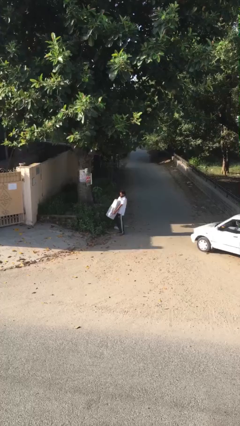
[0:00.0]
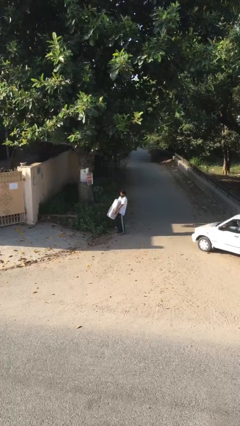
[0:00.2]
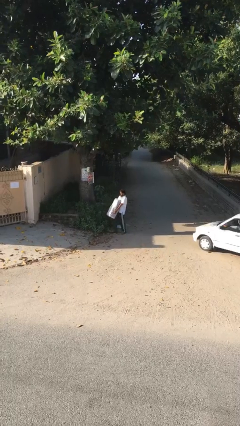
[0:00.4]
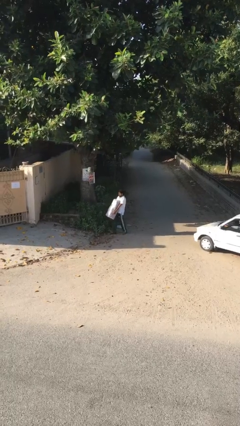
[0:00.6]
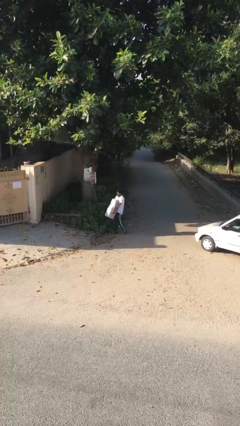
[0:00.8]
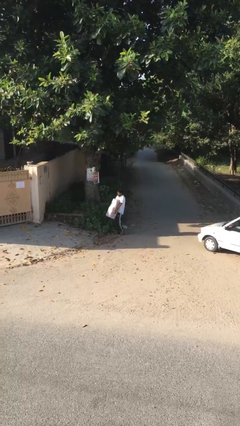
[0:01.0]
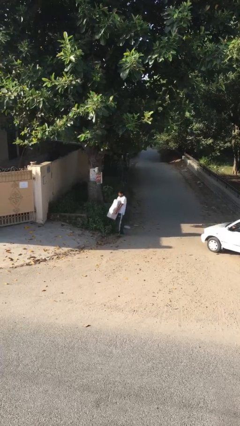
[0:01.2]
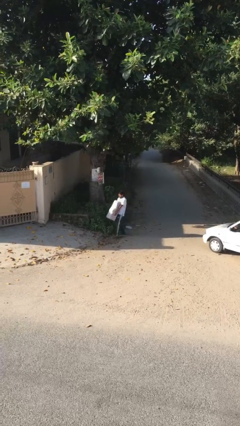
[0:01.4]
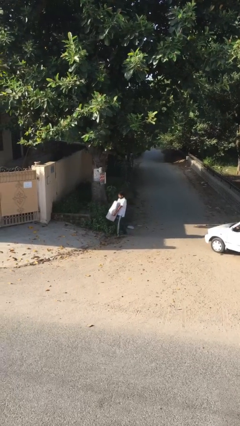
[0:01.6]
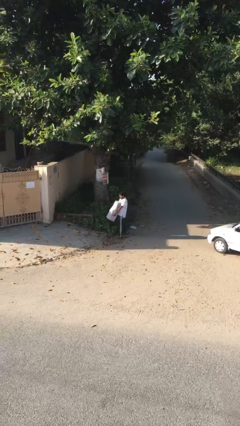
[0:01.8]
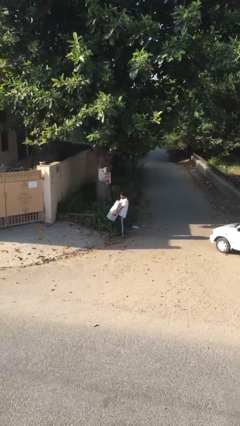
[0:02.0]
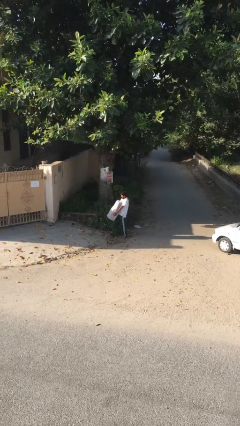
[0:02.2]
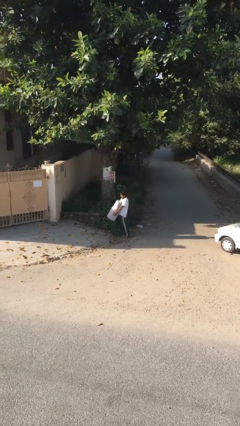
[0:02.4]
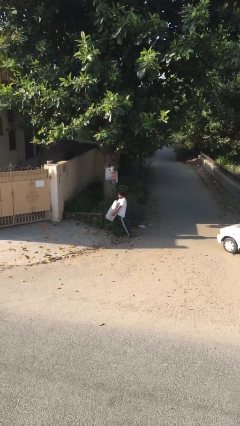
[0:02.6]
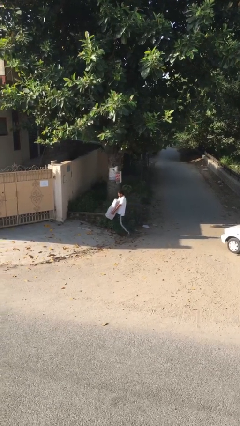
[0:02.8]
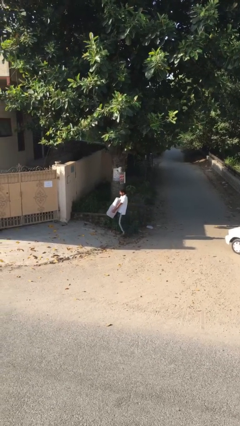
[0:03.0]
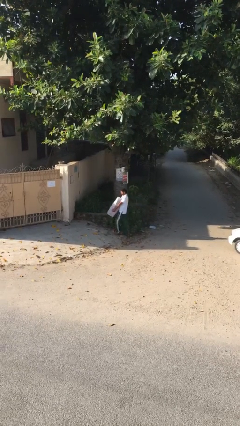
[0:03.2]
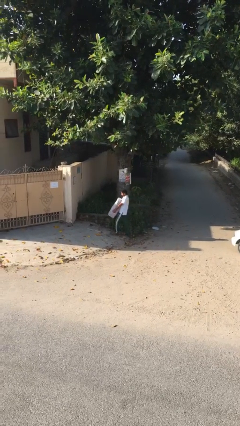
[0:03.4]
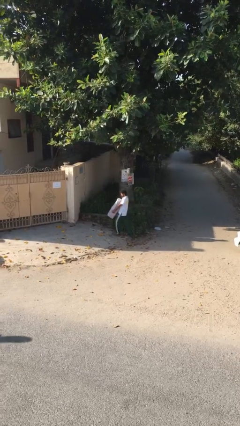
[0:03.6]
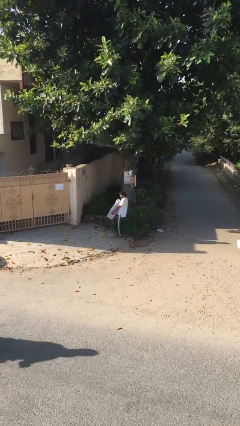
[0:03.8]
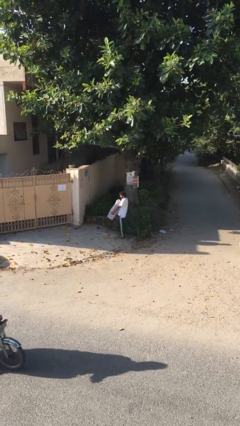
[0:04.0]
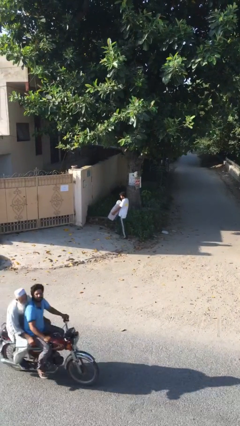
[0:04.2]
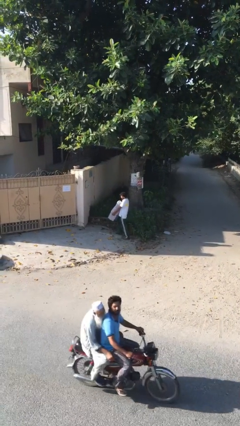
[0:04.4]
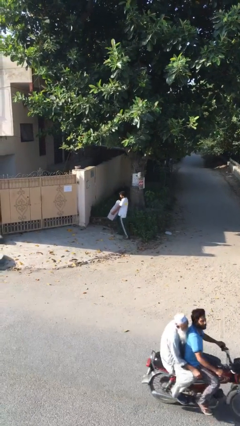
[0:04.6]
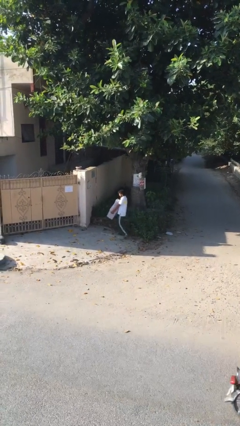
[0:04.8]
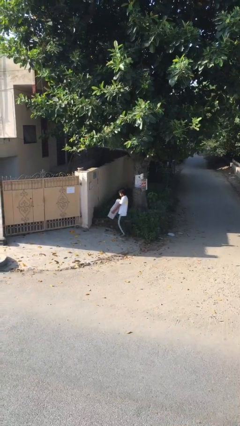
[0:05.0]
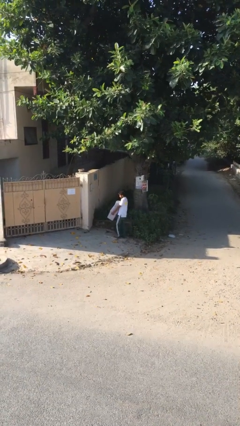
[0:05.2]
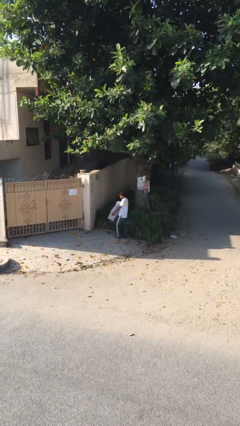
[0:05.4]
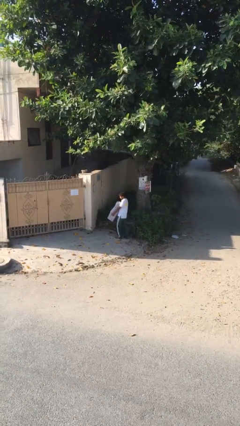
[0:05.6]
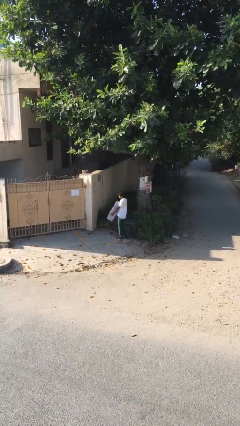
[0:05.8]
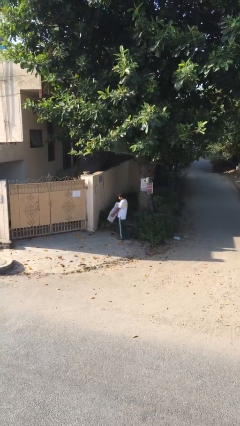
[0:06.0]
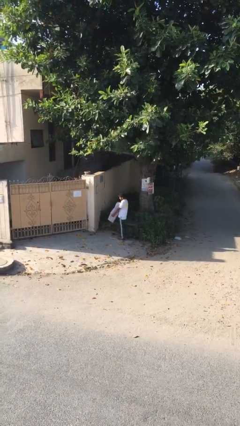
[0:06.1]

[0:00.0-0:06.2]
person carries heavy object

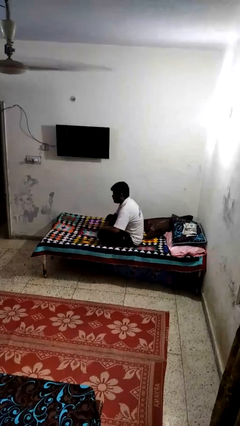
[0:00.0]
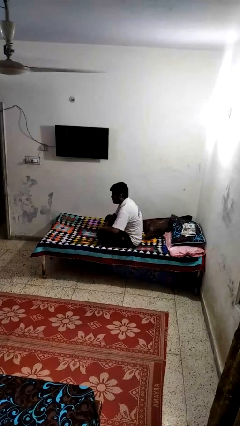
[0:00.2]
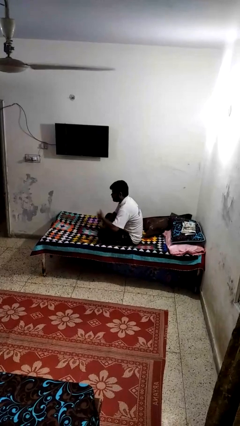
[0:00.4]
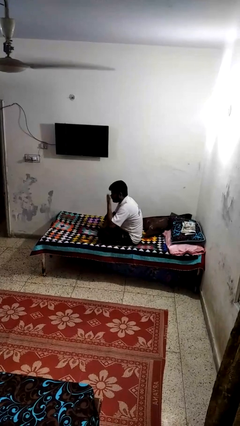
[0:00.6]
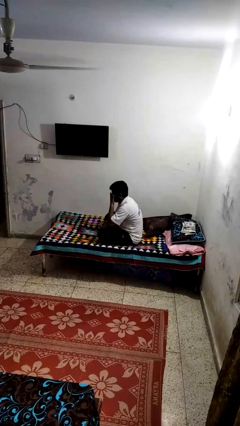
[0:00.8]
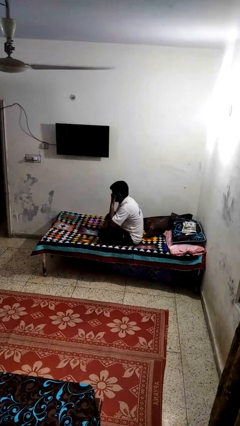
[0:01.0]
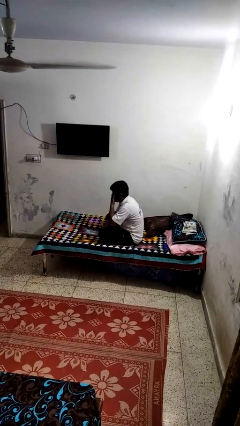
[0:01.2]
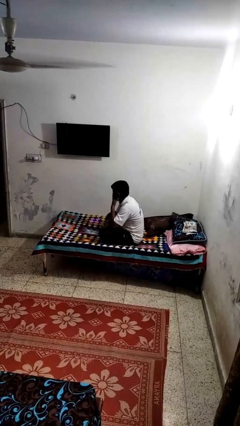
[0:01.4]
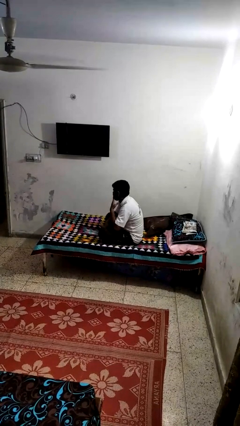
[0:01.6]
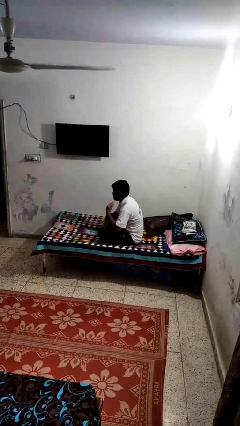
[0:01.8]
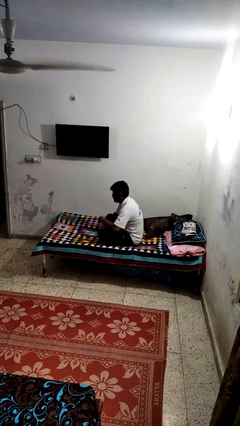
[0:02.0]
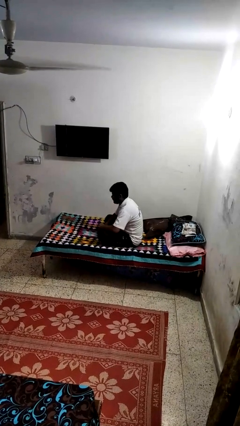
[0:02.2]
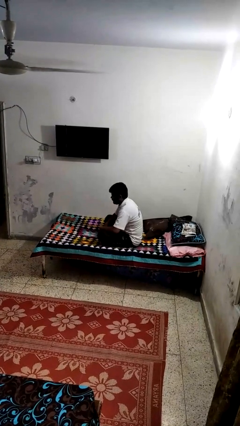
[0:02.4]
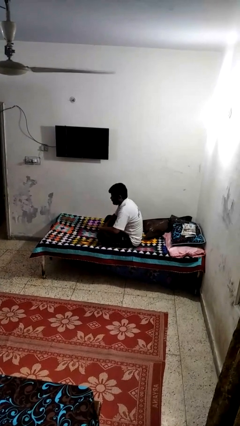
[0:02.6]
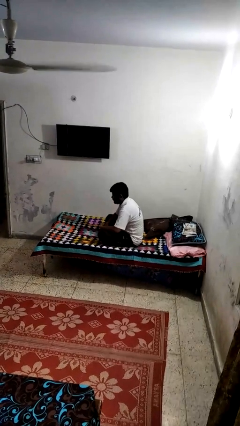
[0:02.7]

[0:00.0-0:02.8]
person scratches face

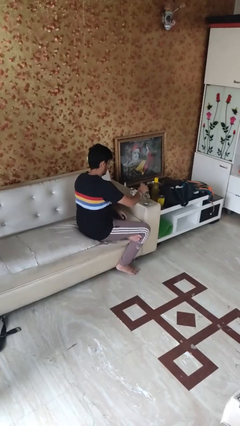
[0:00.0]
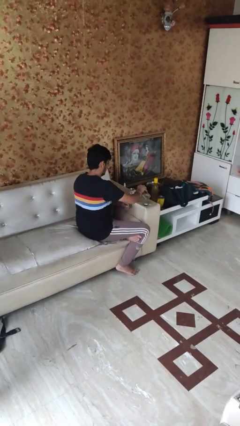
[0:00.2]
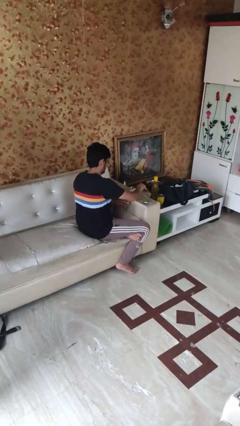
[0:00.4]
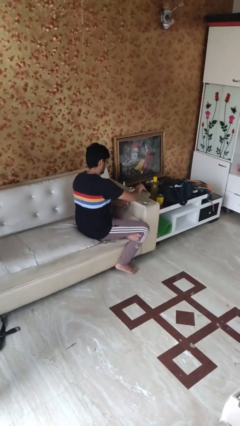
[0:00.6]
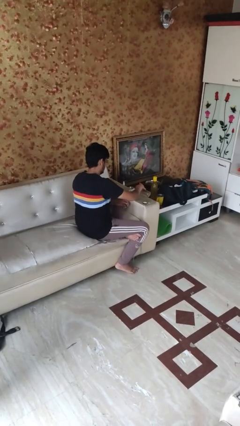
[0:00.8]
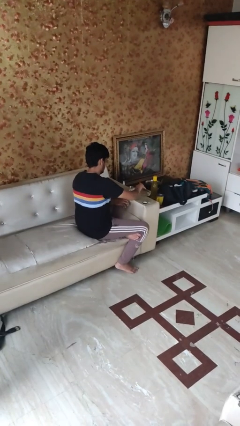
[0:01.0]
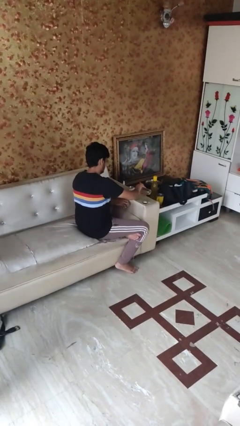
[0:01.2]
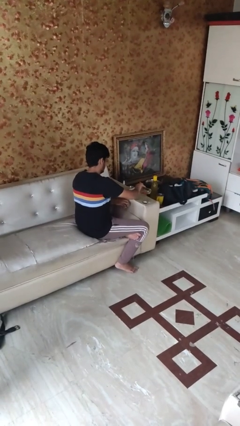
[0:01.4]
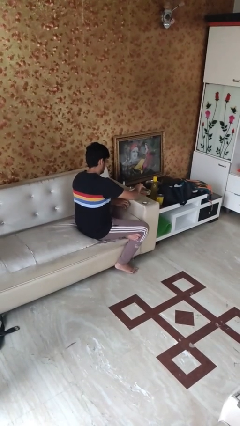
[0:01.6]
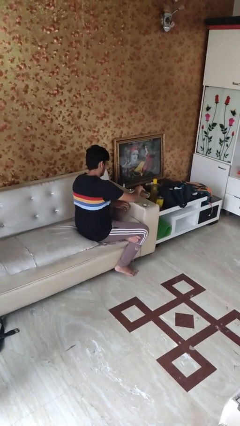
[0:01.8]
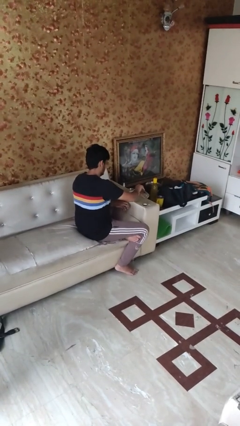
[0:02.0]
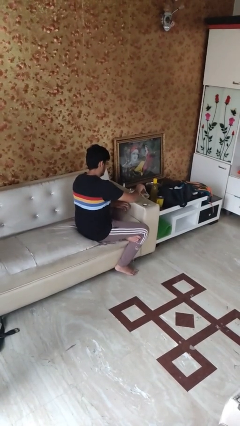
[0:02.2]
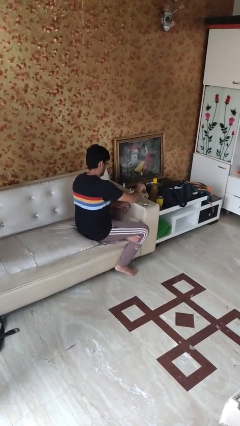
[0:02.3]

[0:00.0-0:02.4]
person pours liquid into cup

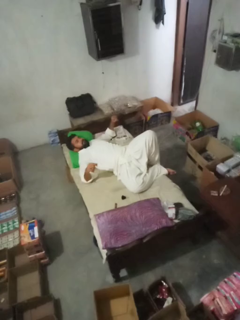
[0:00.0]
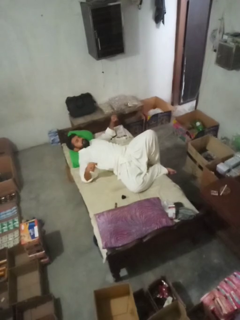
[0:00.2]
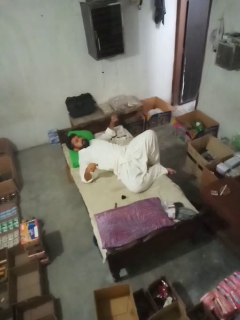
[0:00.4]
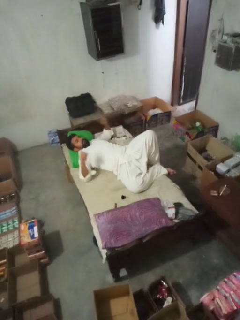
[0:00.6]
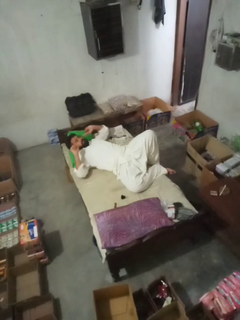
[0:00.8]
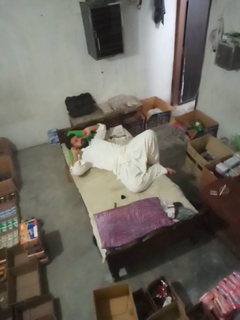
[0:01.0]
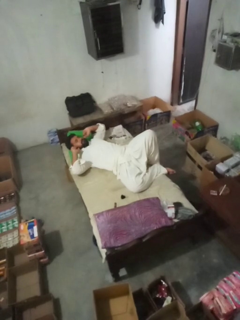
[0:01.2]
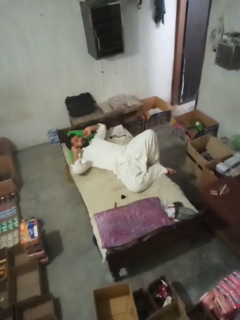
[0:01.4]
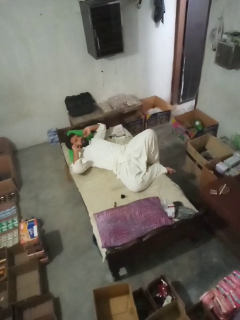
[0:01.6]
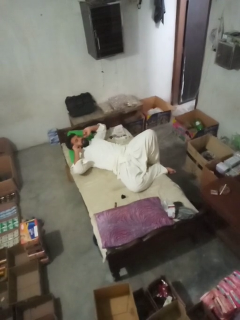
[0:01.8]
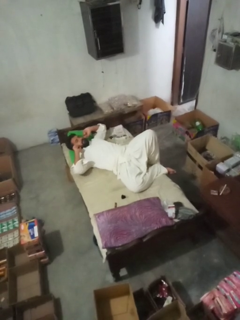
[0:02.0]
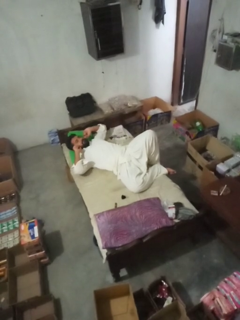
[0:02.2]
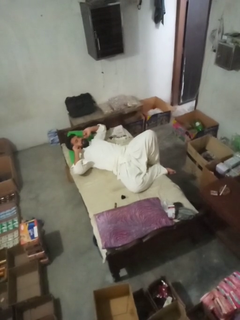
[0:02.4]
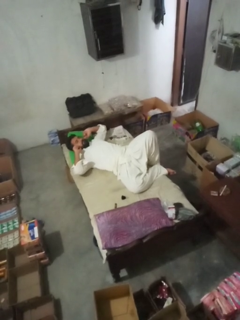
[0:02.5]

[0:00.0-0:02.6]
person puts fingers in ear

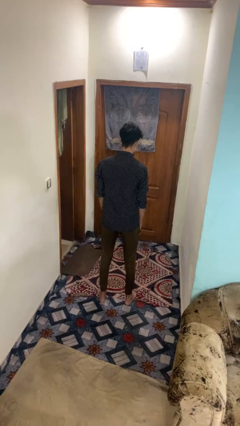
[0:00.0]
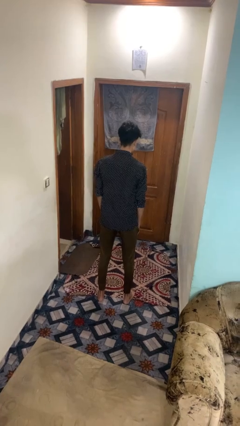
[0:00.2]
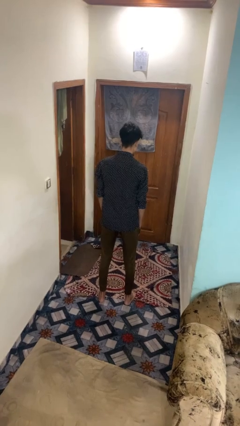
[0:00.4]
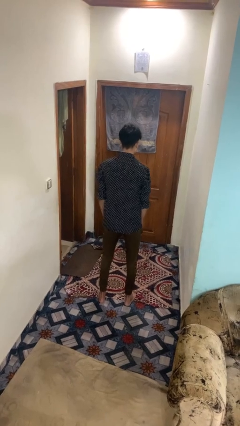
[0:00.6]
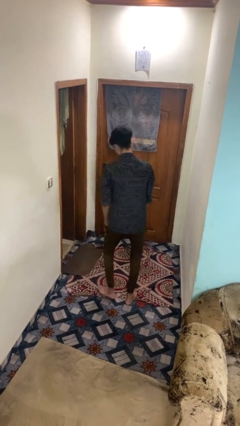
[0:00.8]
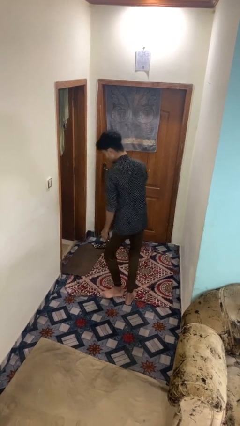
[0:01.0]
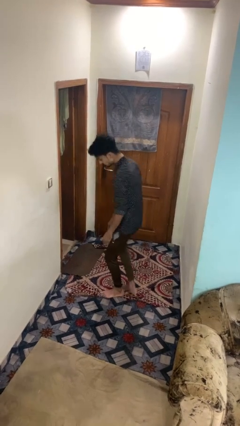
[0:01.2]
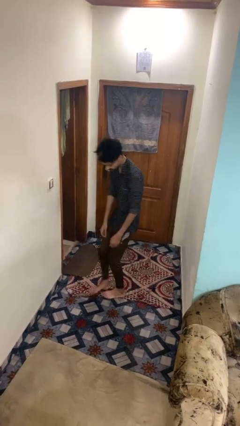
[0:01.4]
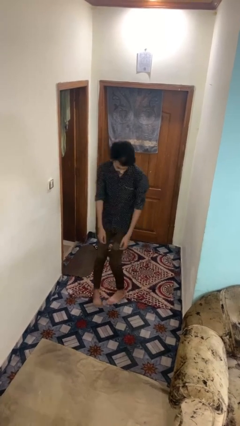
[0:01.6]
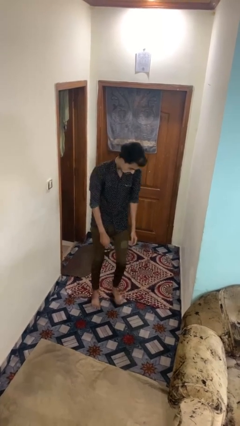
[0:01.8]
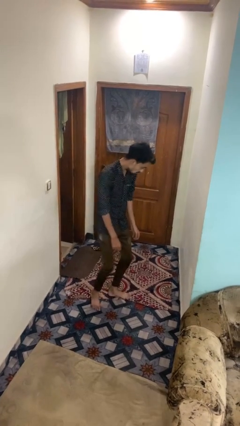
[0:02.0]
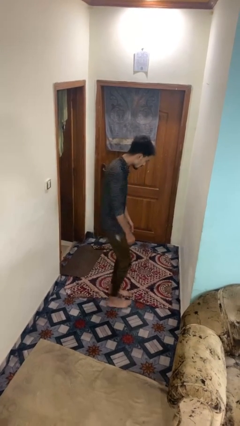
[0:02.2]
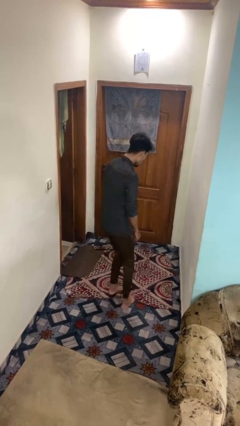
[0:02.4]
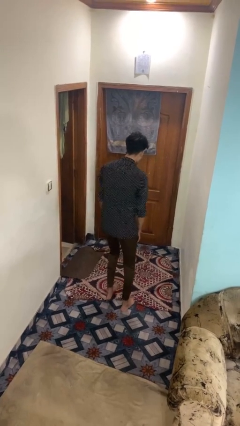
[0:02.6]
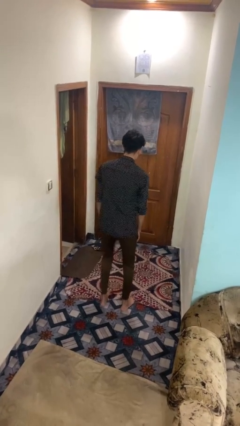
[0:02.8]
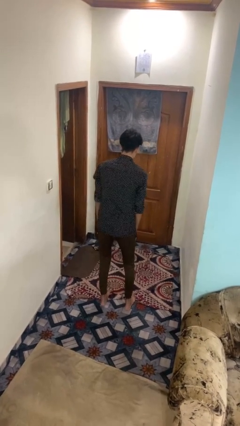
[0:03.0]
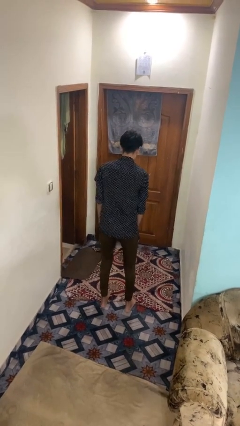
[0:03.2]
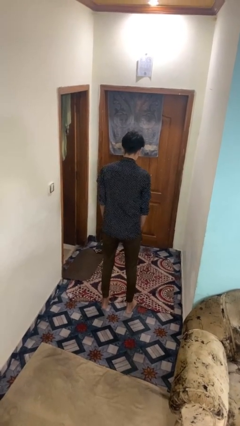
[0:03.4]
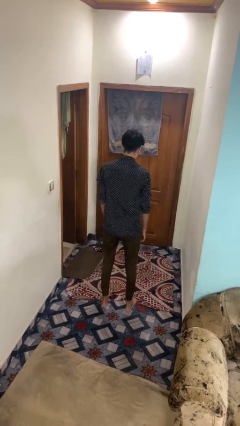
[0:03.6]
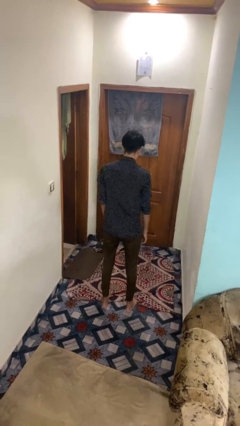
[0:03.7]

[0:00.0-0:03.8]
person twirls
